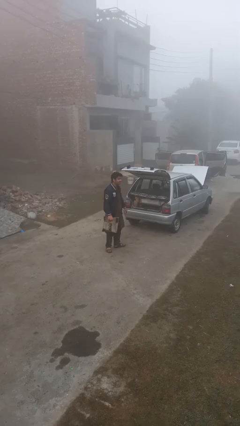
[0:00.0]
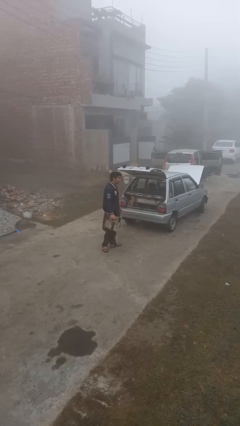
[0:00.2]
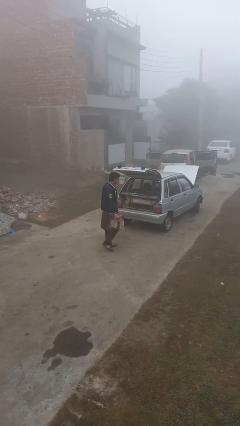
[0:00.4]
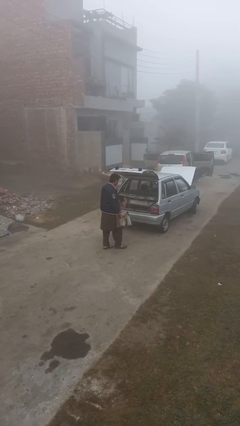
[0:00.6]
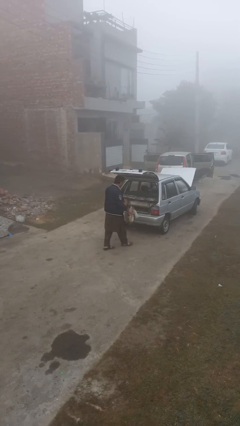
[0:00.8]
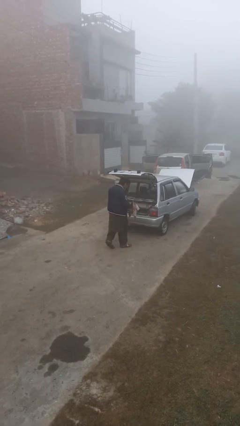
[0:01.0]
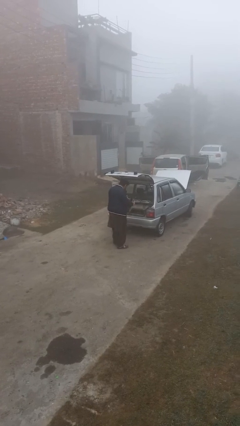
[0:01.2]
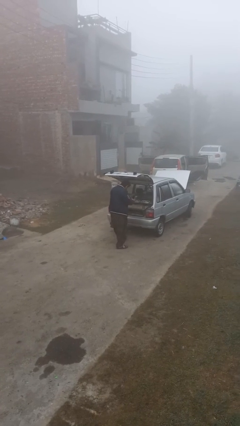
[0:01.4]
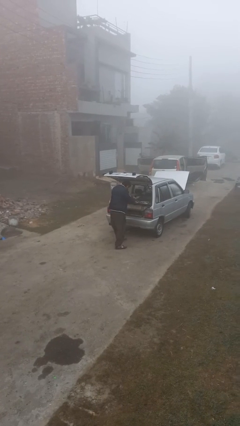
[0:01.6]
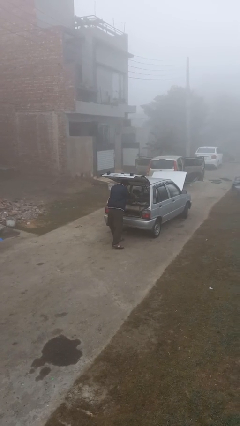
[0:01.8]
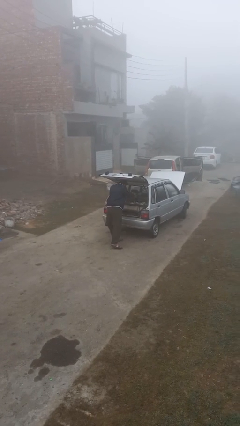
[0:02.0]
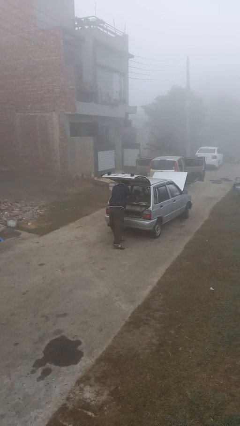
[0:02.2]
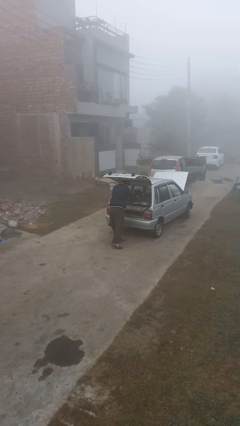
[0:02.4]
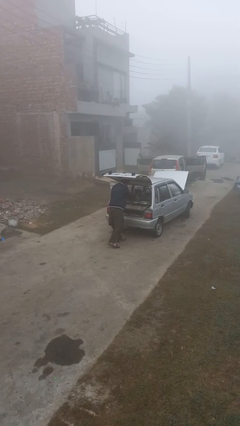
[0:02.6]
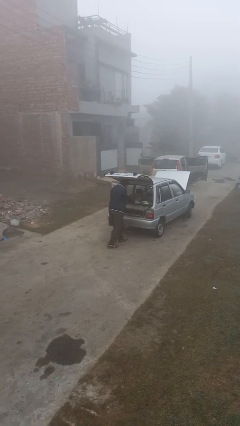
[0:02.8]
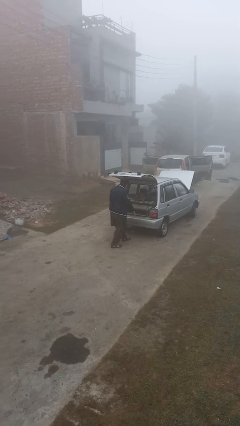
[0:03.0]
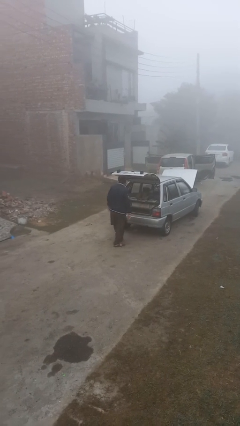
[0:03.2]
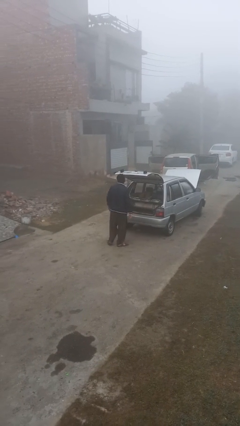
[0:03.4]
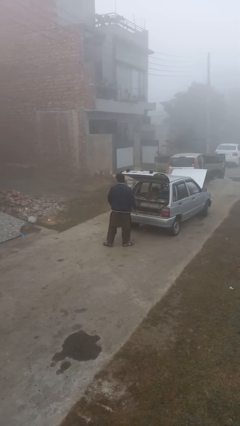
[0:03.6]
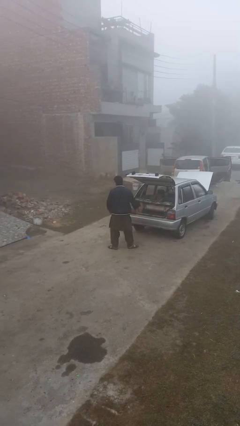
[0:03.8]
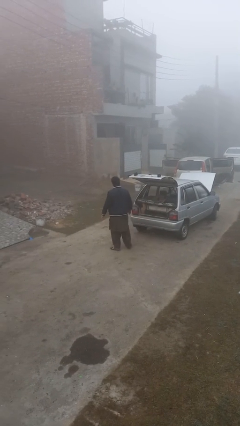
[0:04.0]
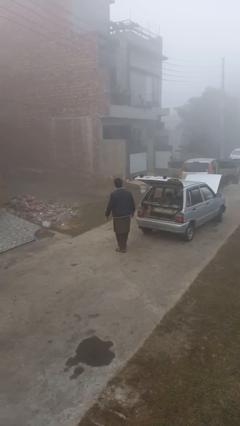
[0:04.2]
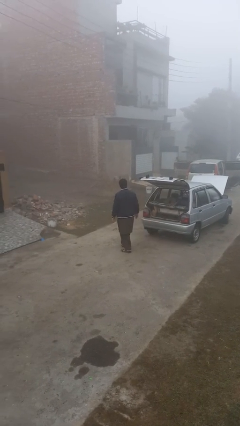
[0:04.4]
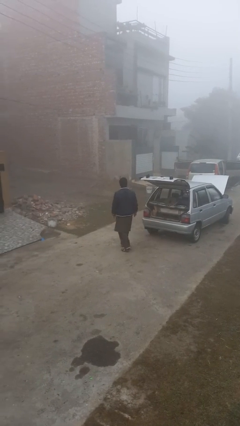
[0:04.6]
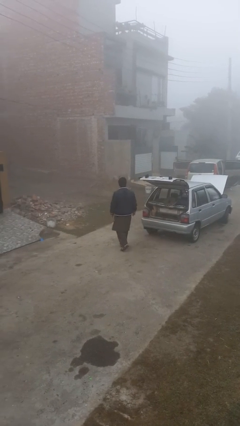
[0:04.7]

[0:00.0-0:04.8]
person loads car

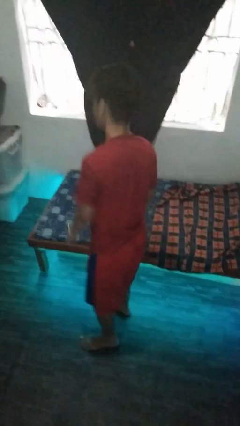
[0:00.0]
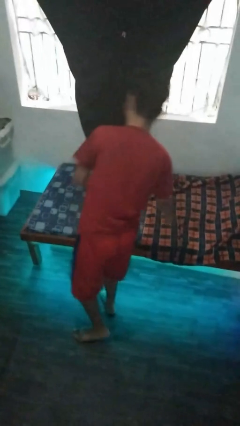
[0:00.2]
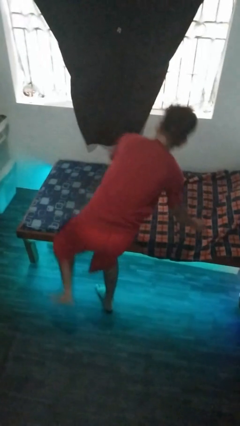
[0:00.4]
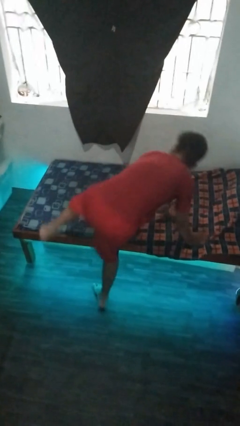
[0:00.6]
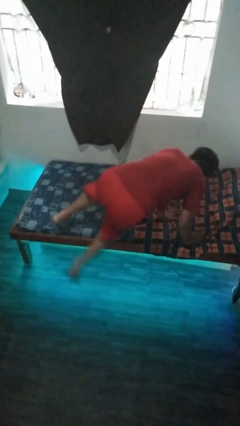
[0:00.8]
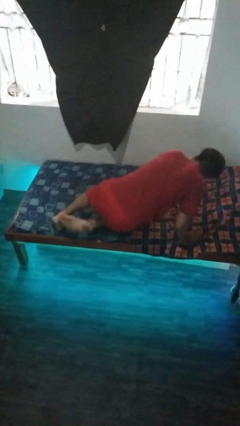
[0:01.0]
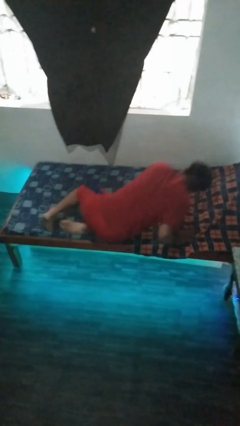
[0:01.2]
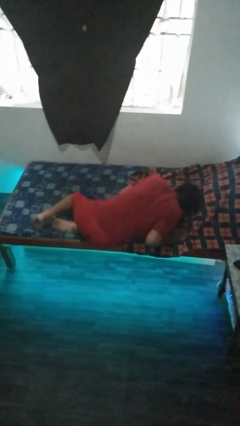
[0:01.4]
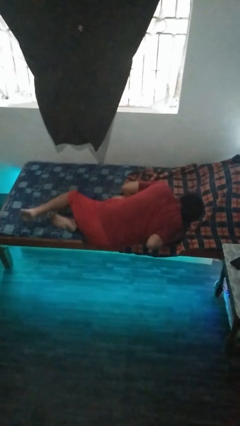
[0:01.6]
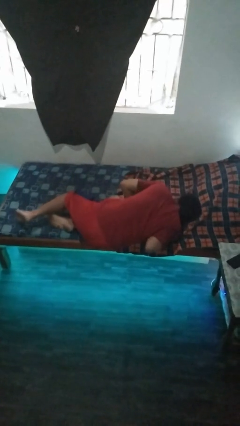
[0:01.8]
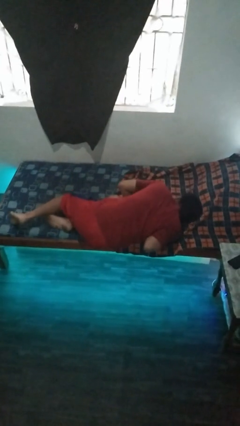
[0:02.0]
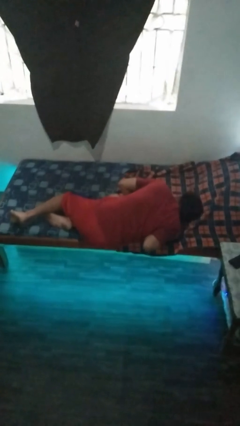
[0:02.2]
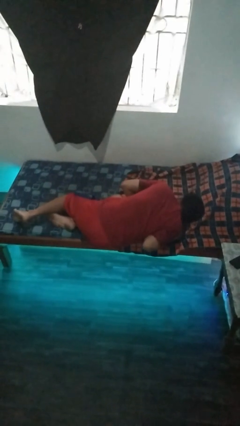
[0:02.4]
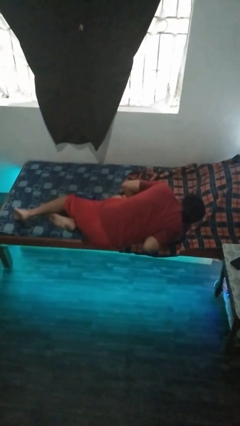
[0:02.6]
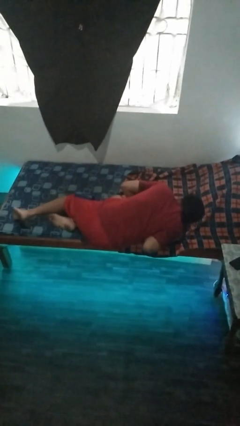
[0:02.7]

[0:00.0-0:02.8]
person lies down on bed

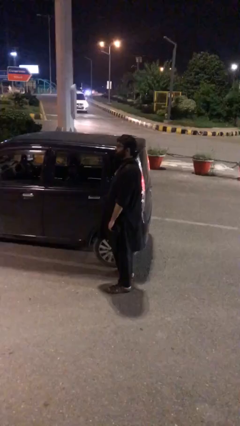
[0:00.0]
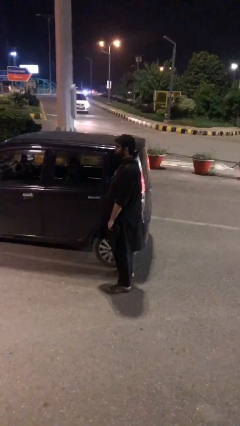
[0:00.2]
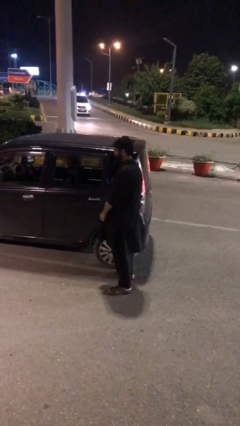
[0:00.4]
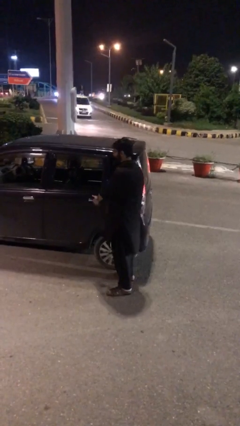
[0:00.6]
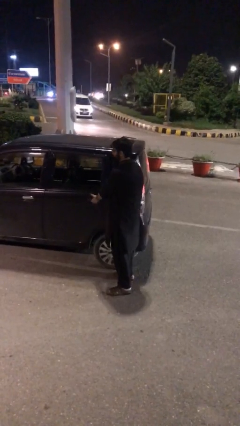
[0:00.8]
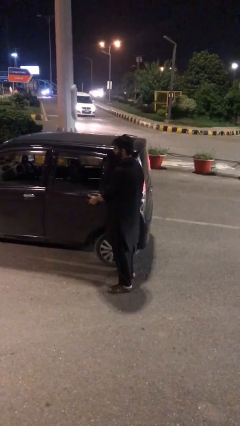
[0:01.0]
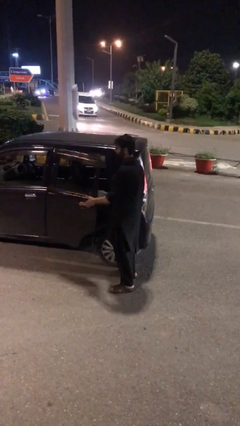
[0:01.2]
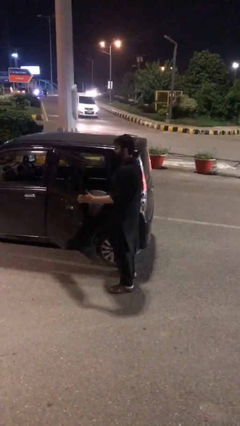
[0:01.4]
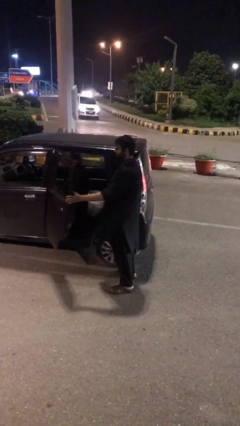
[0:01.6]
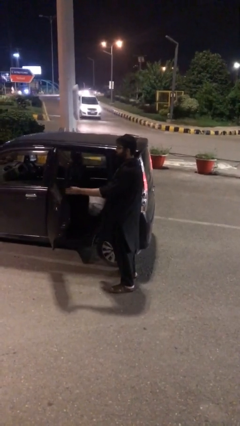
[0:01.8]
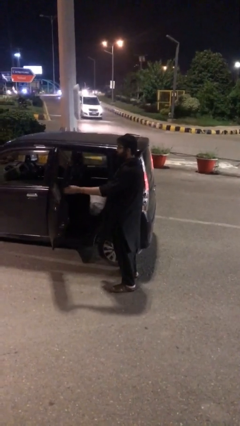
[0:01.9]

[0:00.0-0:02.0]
person opens car door

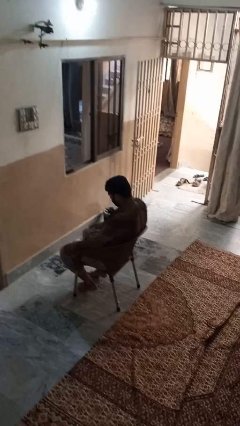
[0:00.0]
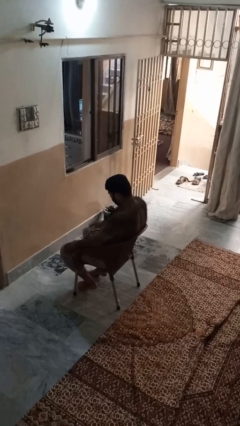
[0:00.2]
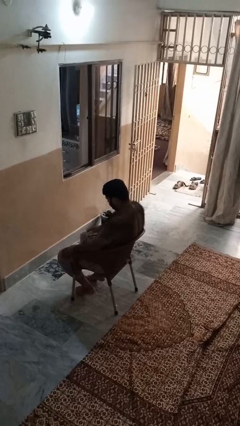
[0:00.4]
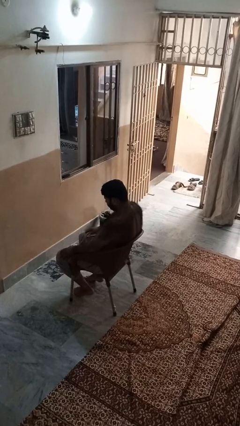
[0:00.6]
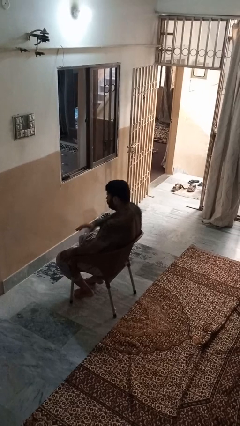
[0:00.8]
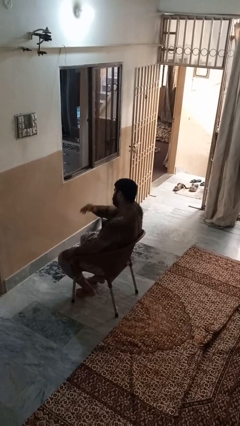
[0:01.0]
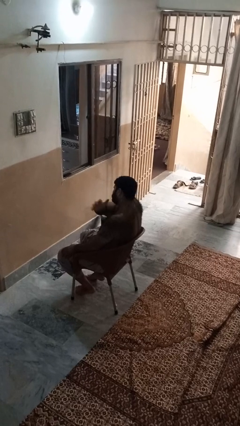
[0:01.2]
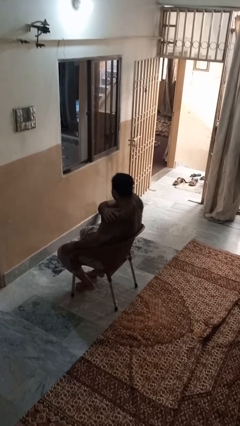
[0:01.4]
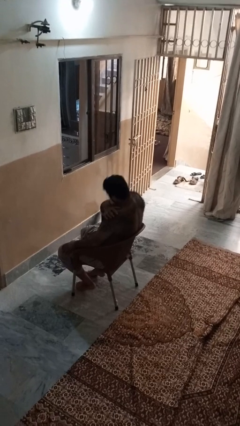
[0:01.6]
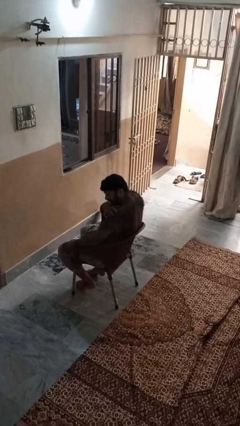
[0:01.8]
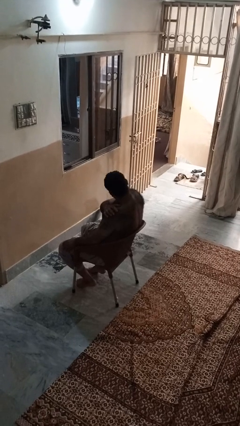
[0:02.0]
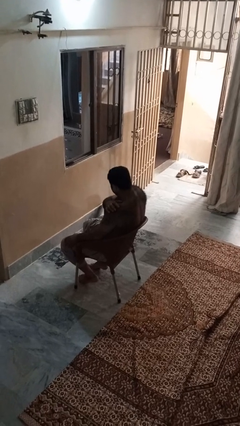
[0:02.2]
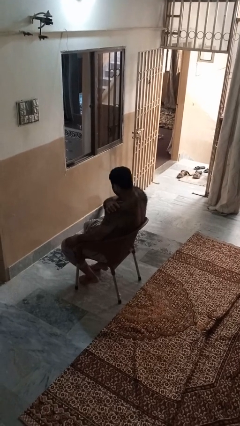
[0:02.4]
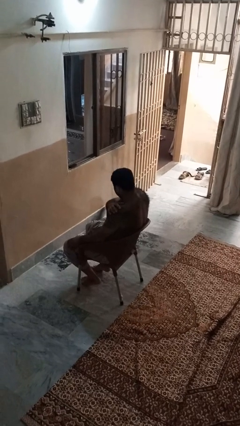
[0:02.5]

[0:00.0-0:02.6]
person shrugs

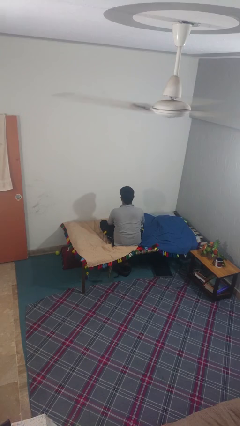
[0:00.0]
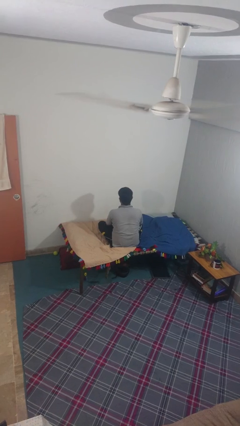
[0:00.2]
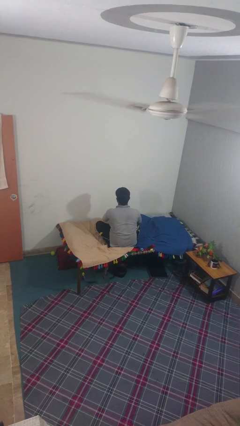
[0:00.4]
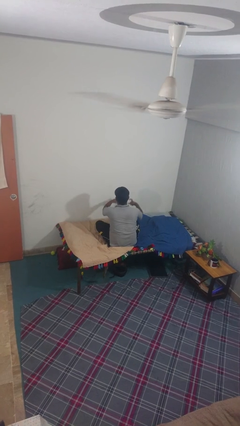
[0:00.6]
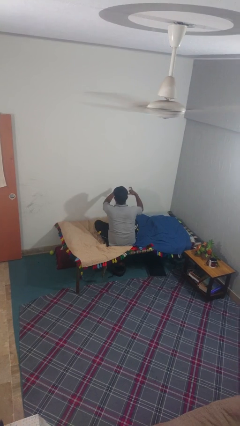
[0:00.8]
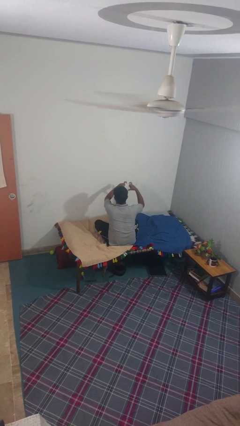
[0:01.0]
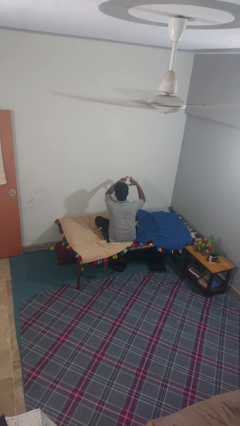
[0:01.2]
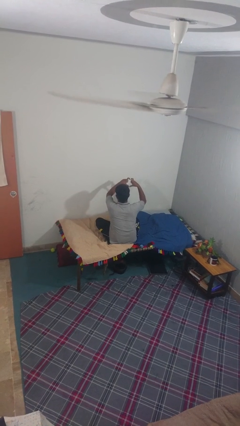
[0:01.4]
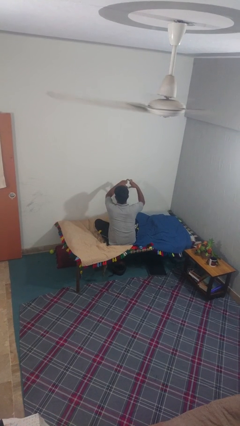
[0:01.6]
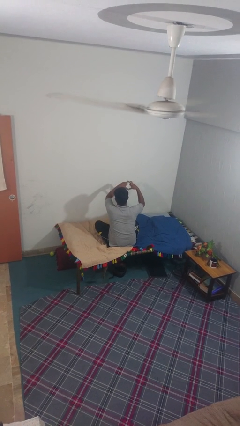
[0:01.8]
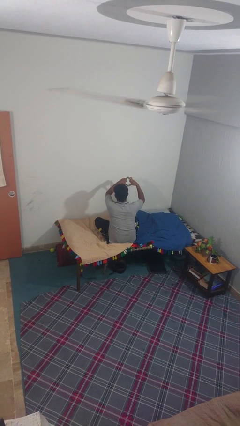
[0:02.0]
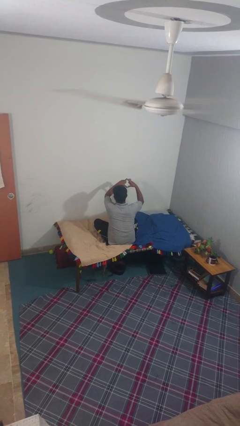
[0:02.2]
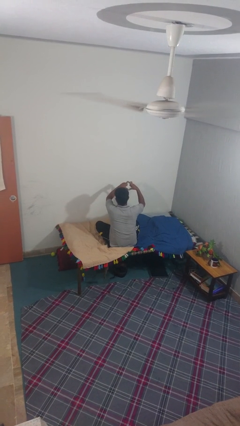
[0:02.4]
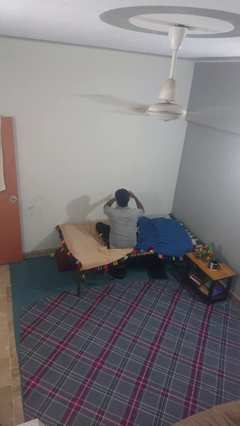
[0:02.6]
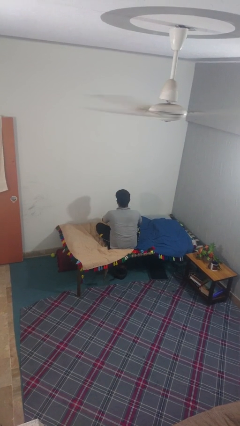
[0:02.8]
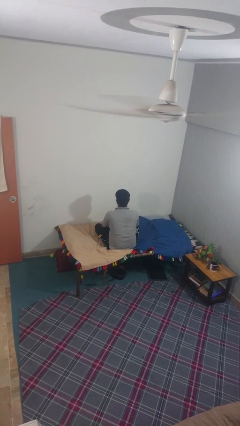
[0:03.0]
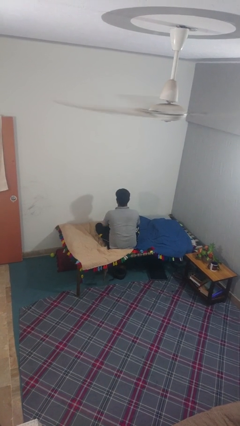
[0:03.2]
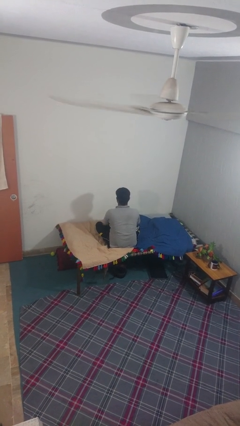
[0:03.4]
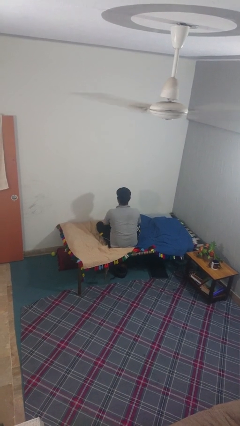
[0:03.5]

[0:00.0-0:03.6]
person gestures heart

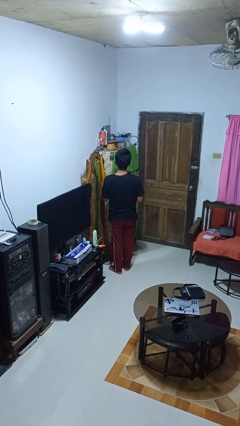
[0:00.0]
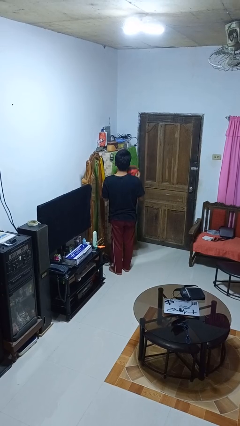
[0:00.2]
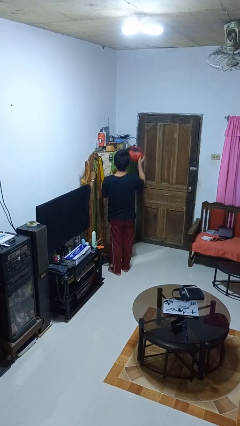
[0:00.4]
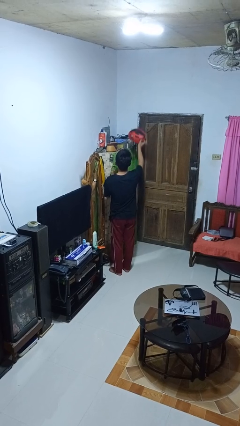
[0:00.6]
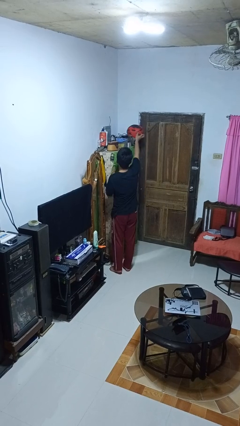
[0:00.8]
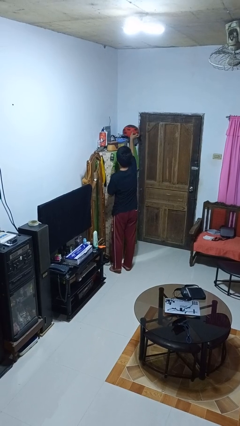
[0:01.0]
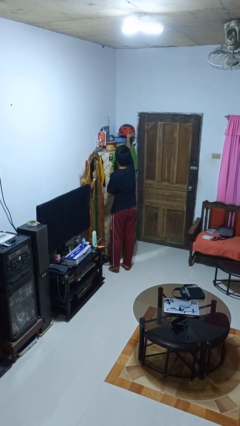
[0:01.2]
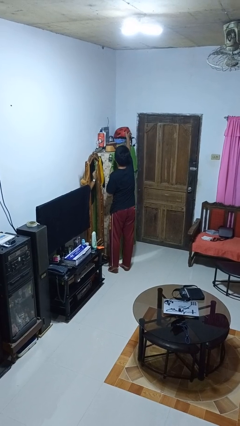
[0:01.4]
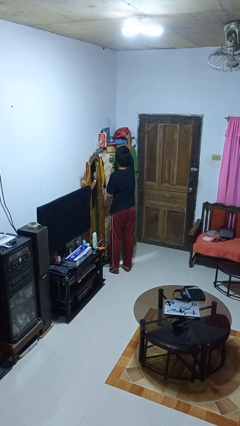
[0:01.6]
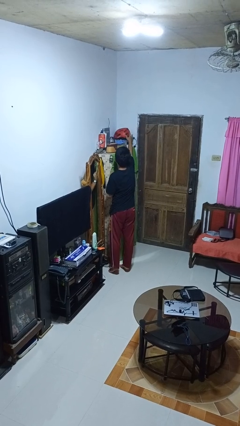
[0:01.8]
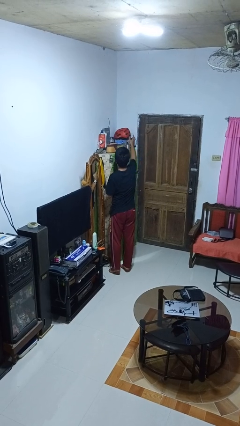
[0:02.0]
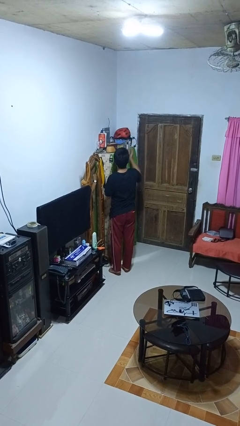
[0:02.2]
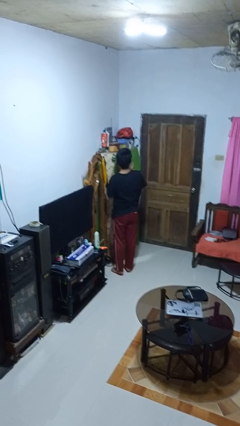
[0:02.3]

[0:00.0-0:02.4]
person puts down object on shelf
